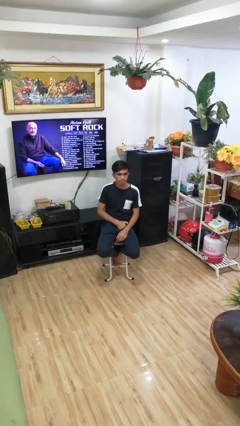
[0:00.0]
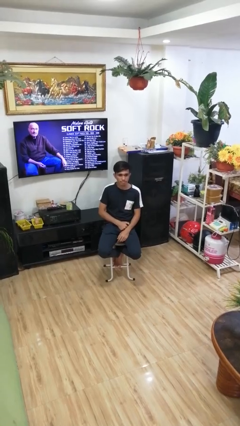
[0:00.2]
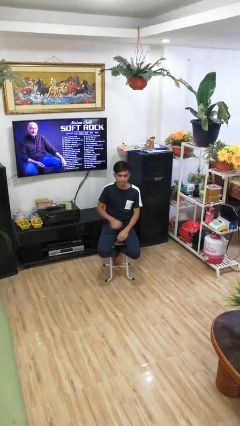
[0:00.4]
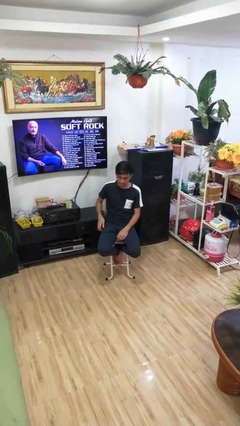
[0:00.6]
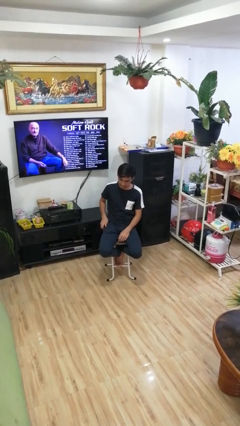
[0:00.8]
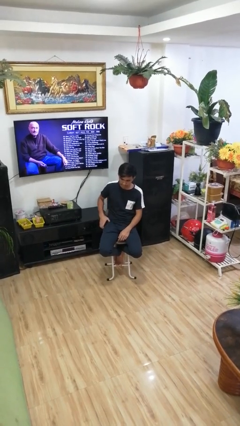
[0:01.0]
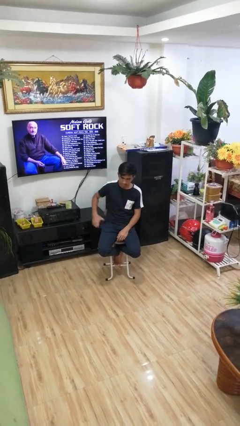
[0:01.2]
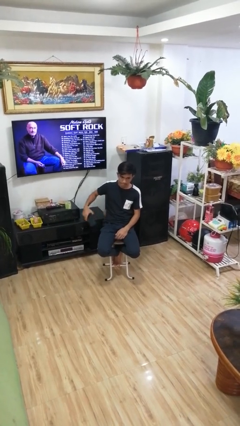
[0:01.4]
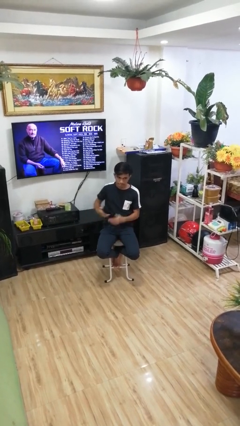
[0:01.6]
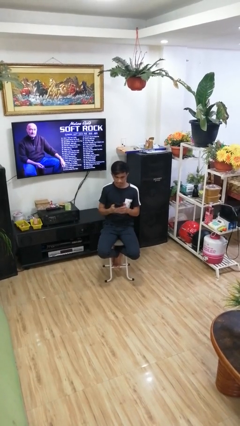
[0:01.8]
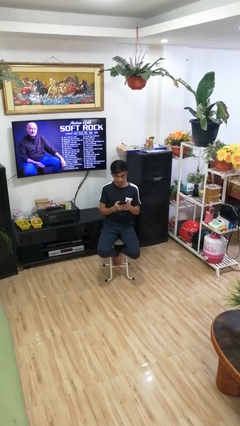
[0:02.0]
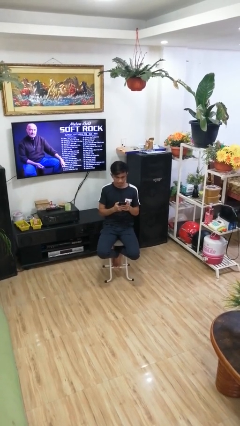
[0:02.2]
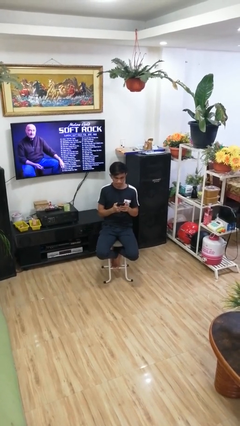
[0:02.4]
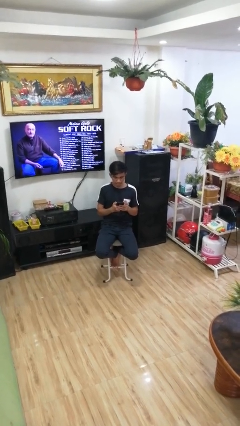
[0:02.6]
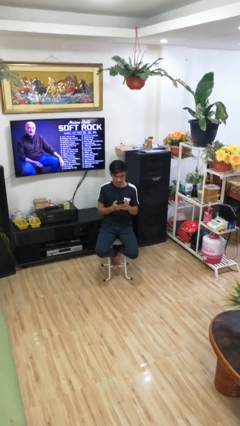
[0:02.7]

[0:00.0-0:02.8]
person takes phone from pocket

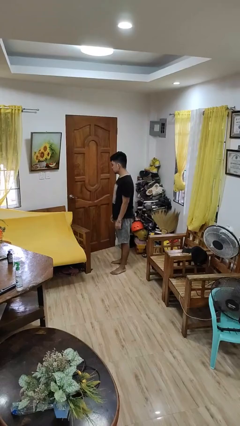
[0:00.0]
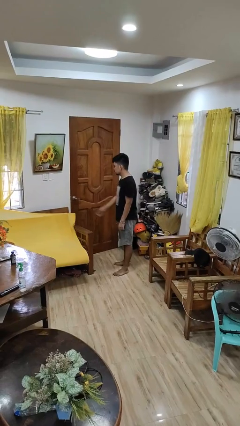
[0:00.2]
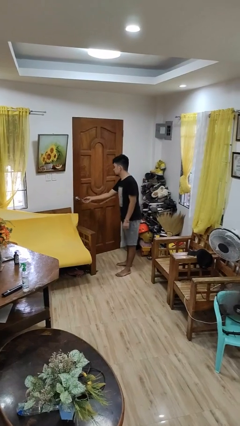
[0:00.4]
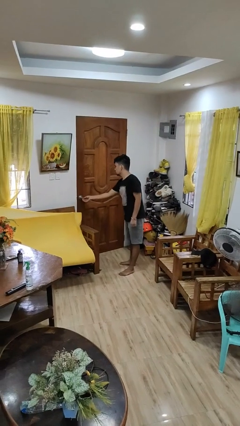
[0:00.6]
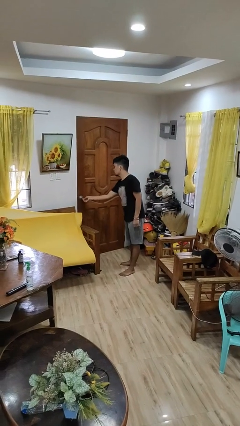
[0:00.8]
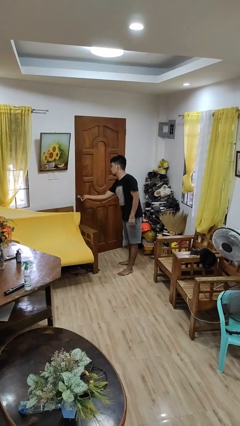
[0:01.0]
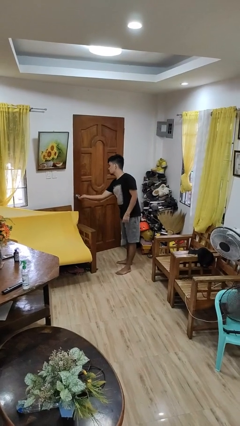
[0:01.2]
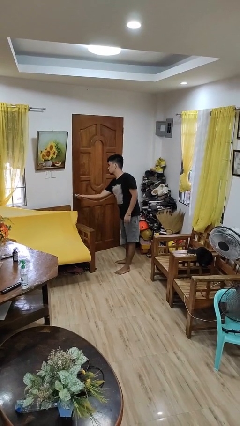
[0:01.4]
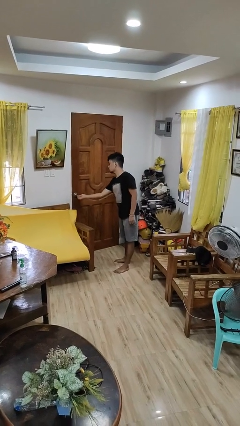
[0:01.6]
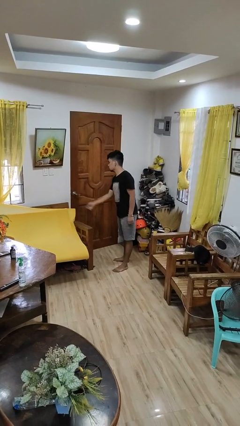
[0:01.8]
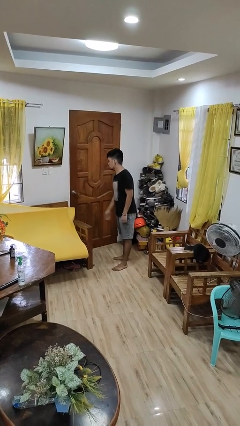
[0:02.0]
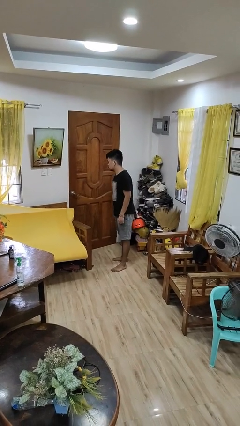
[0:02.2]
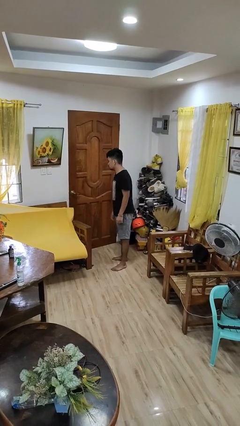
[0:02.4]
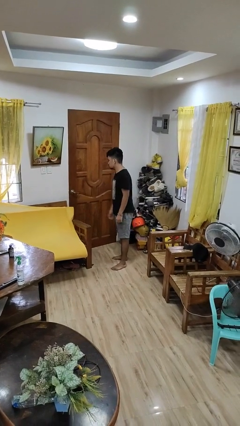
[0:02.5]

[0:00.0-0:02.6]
person unlocks door with keys

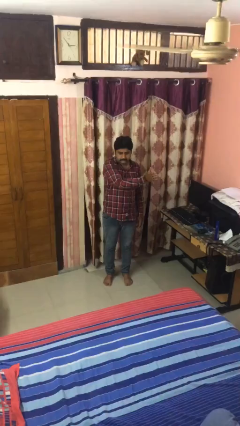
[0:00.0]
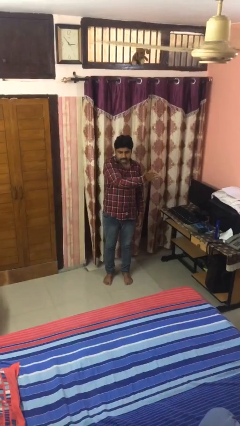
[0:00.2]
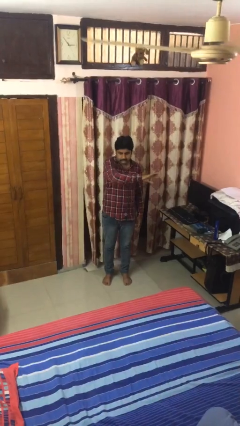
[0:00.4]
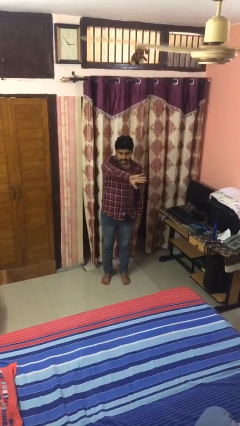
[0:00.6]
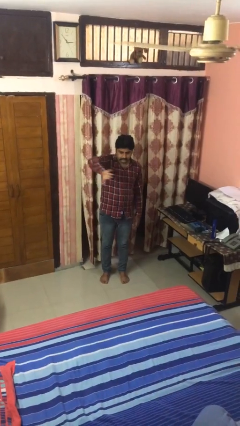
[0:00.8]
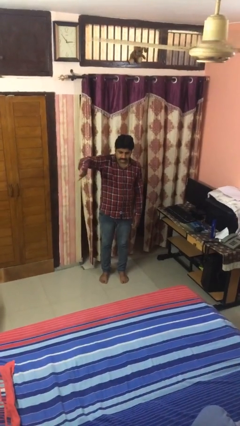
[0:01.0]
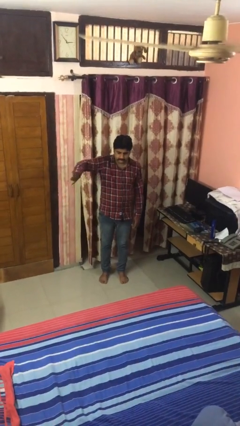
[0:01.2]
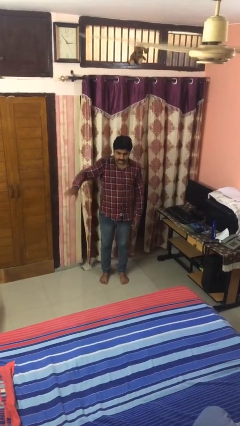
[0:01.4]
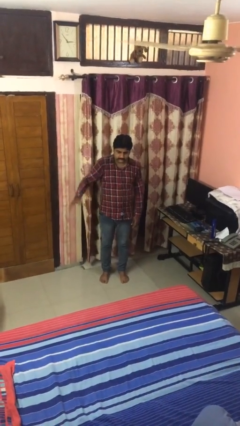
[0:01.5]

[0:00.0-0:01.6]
person gestures swipe right

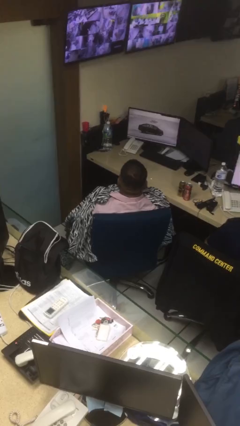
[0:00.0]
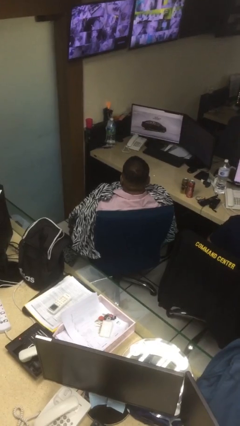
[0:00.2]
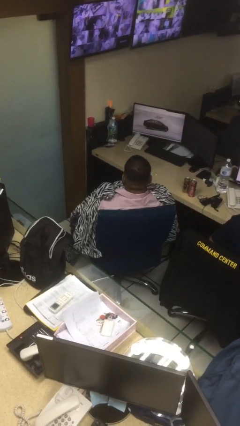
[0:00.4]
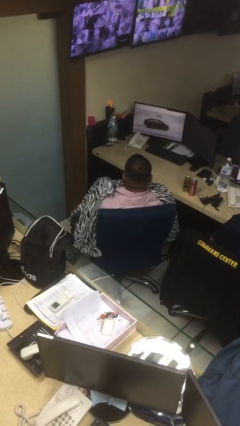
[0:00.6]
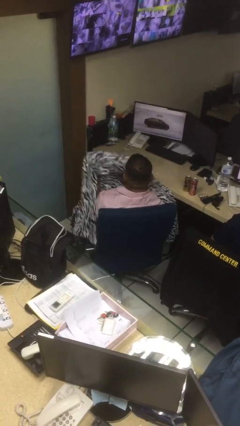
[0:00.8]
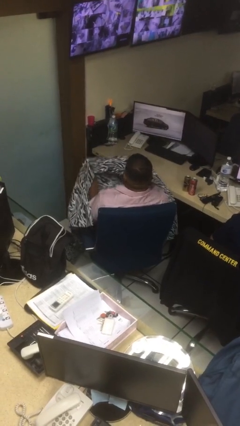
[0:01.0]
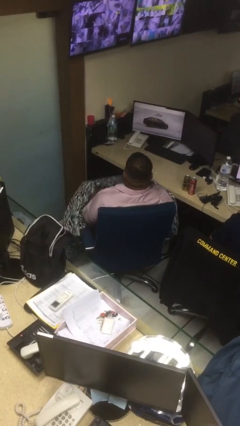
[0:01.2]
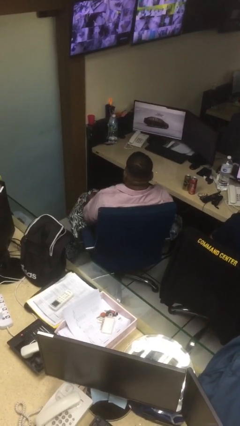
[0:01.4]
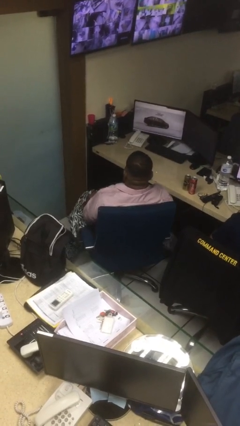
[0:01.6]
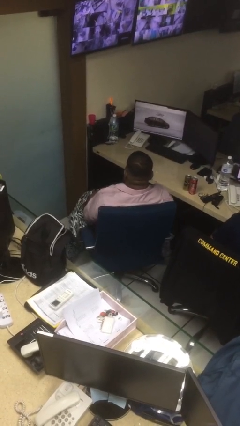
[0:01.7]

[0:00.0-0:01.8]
person uncovers with blanket

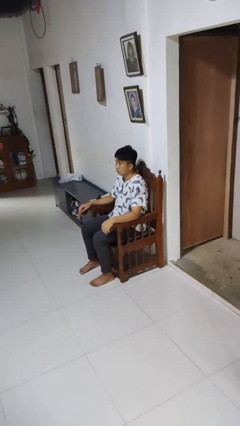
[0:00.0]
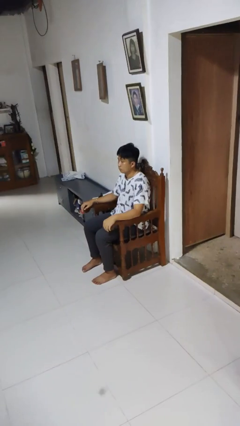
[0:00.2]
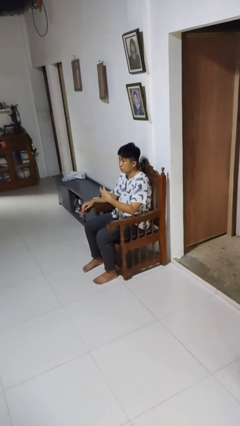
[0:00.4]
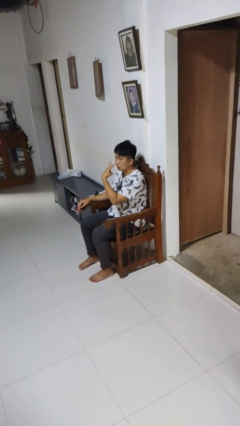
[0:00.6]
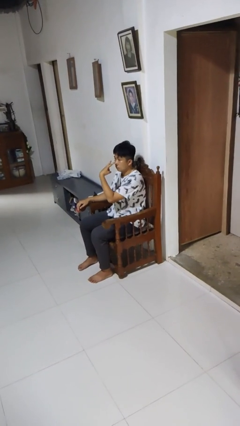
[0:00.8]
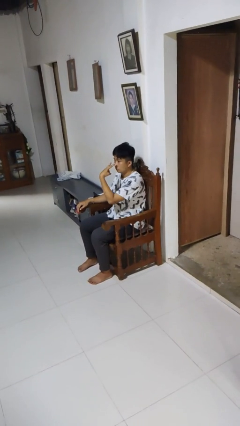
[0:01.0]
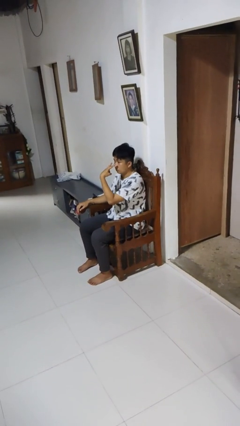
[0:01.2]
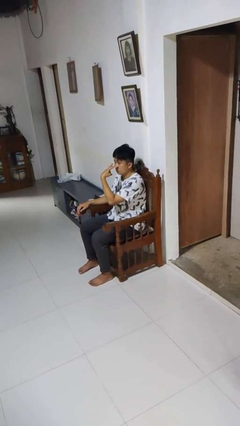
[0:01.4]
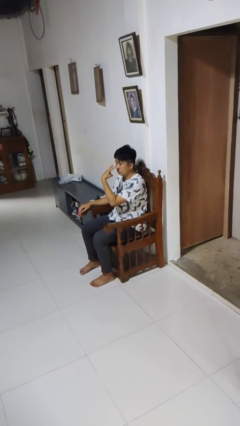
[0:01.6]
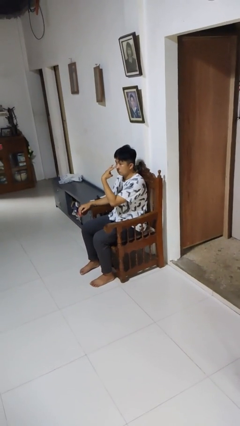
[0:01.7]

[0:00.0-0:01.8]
person gestures watch closely

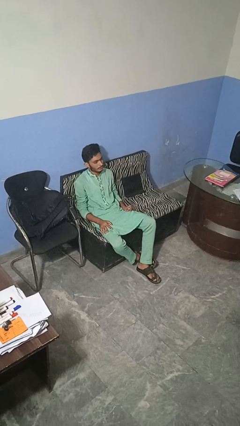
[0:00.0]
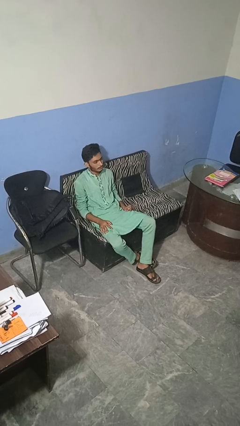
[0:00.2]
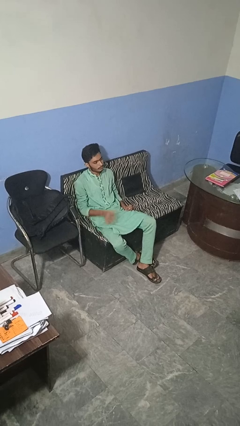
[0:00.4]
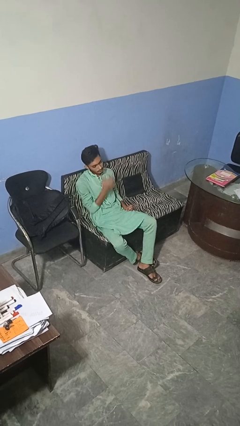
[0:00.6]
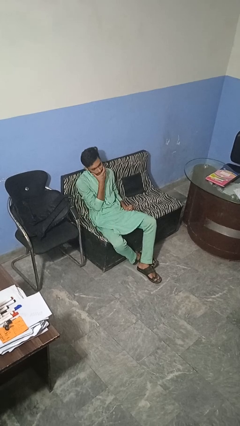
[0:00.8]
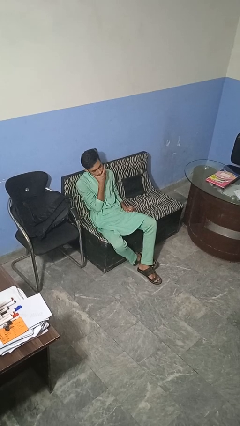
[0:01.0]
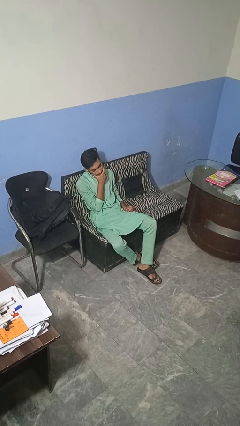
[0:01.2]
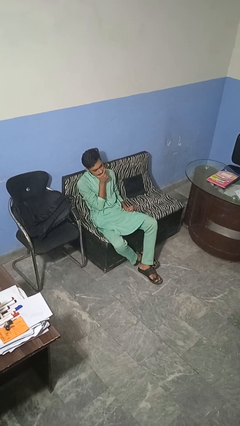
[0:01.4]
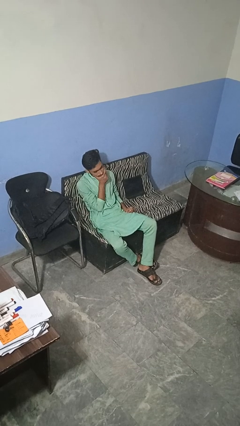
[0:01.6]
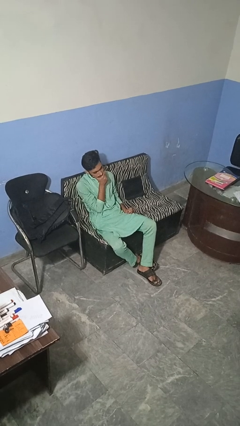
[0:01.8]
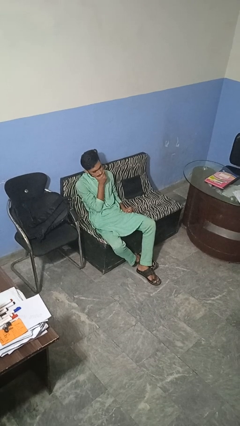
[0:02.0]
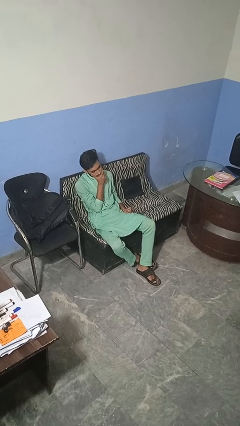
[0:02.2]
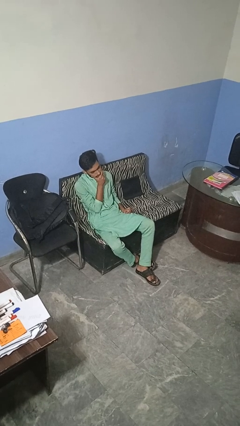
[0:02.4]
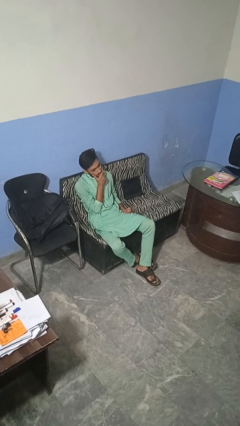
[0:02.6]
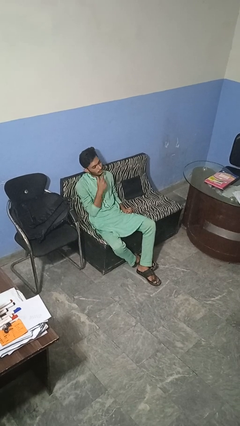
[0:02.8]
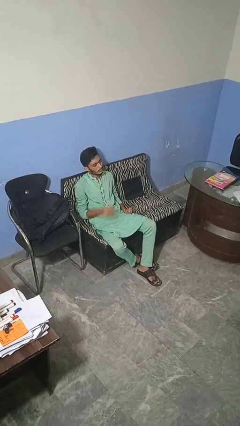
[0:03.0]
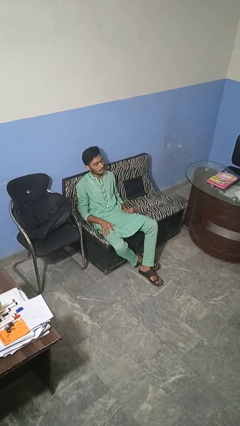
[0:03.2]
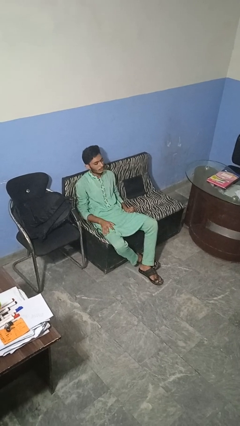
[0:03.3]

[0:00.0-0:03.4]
person strokes chin

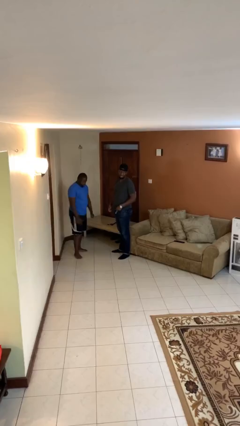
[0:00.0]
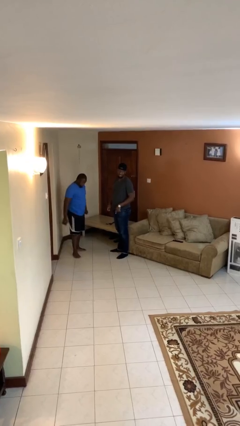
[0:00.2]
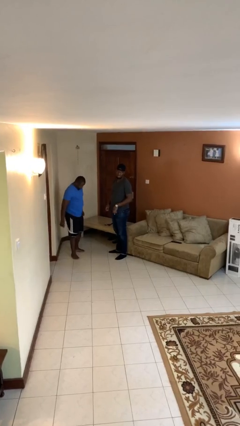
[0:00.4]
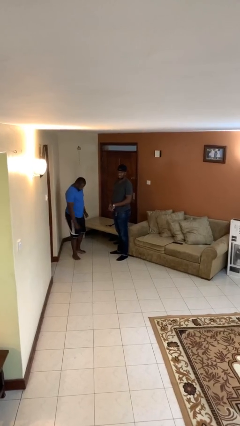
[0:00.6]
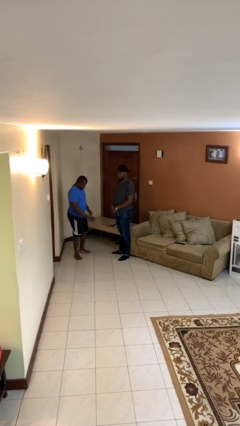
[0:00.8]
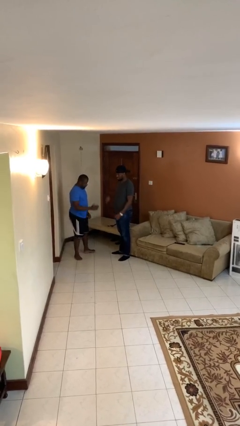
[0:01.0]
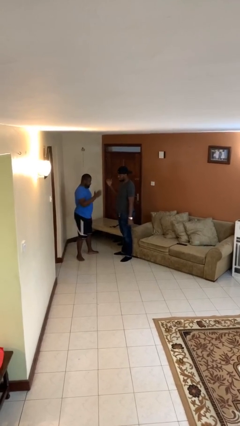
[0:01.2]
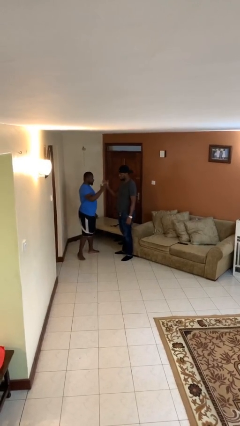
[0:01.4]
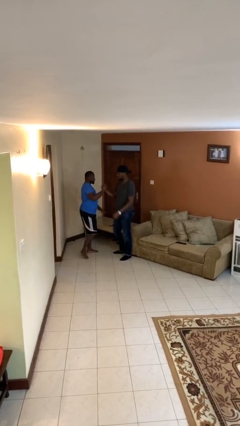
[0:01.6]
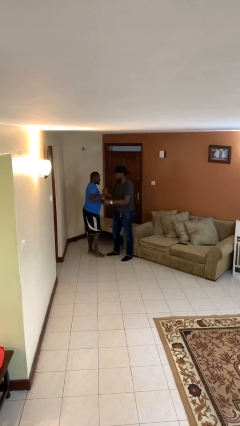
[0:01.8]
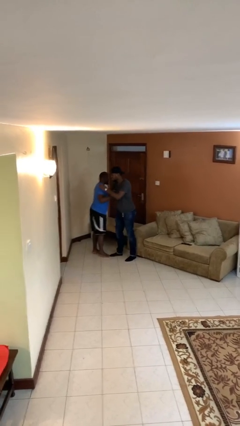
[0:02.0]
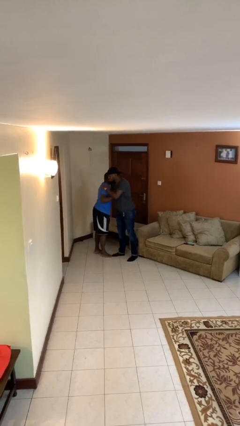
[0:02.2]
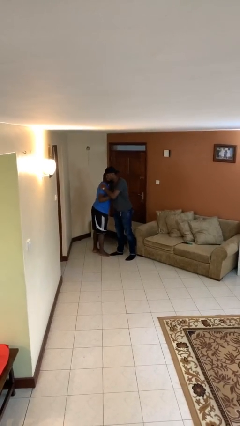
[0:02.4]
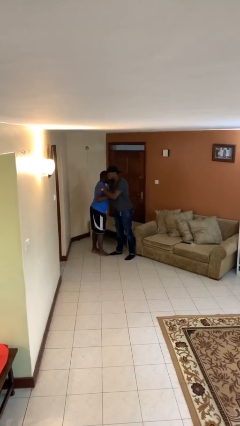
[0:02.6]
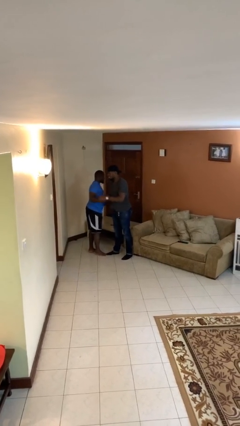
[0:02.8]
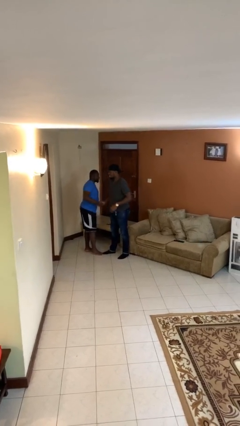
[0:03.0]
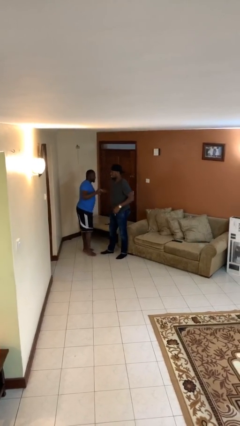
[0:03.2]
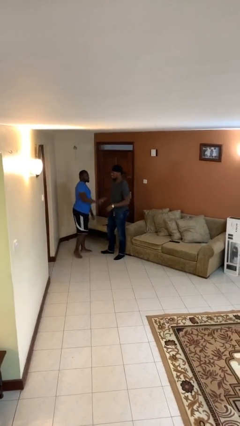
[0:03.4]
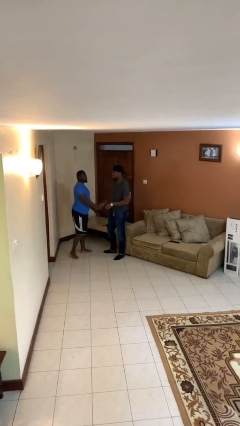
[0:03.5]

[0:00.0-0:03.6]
person embraces person
